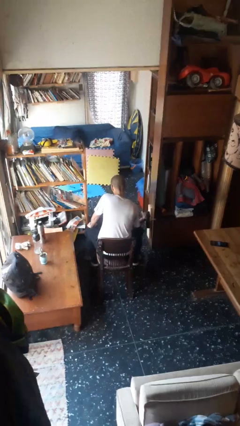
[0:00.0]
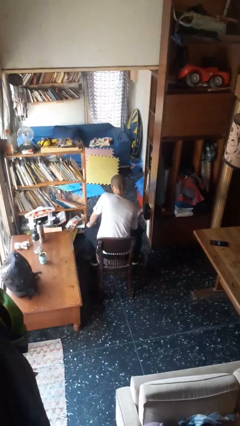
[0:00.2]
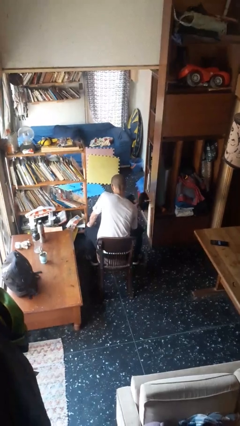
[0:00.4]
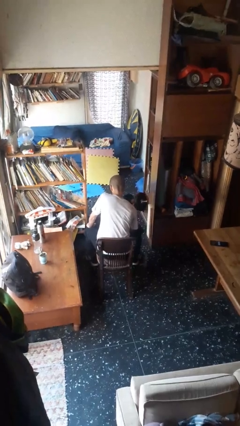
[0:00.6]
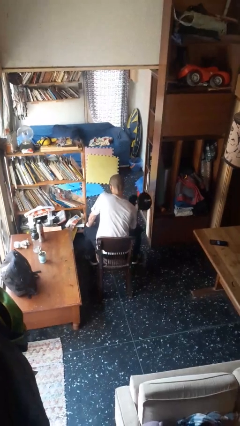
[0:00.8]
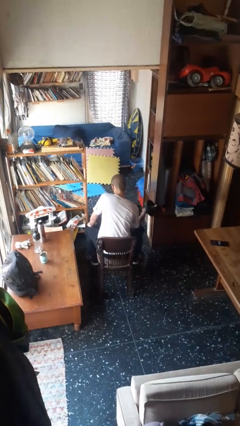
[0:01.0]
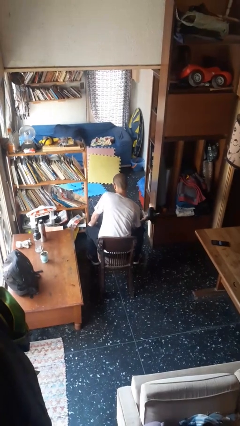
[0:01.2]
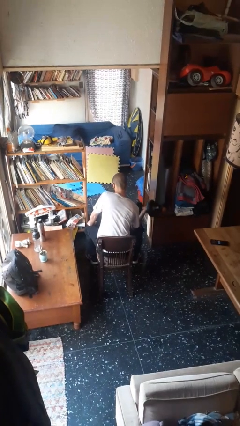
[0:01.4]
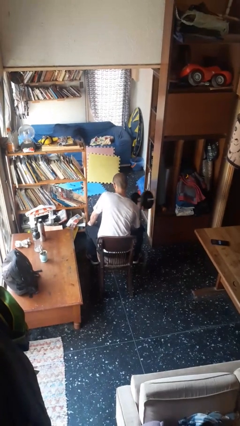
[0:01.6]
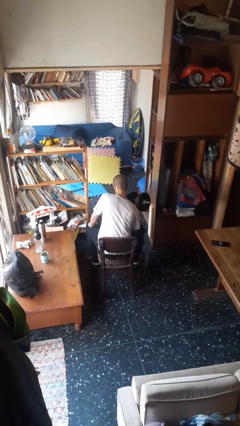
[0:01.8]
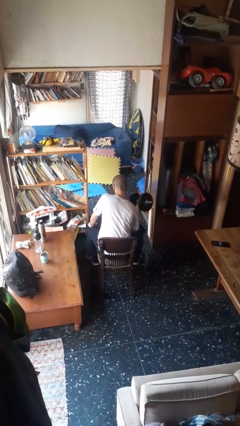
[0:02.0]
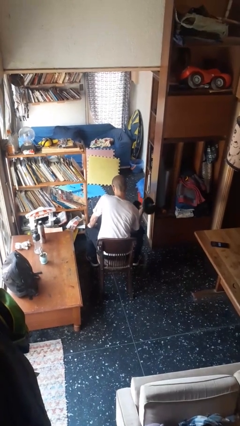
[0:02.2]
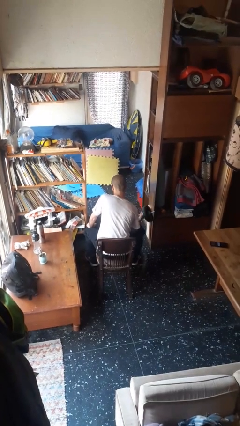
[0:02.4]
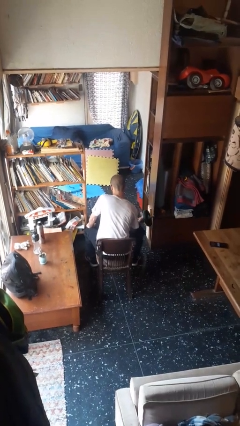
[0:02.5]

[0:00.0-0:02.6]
person lifts dumbbells

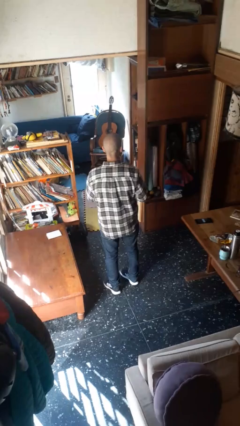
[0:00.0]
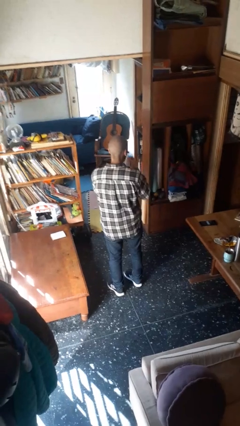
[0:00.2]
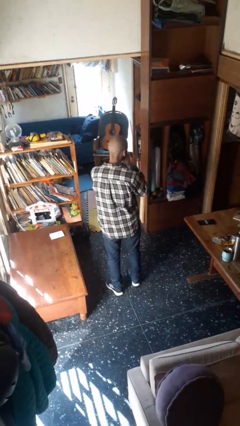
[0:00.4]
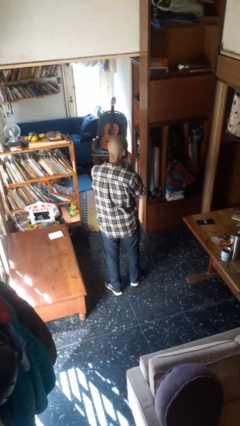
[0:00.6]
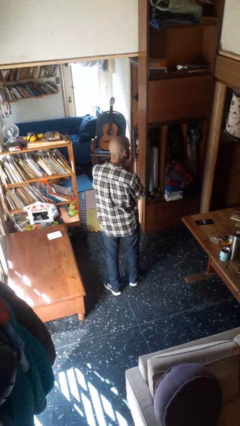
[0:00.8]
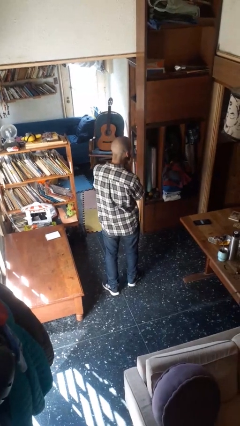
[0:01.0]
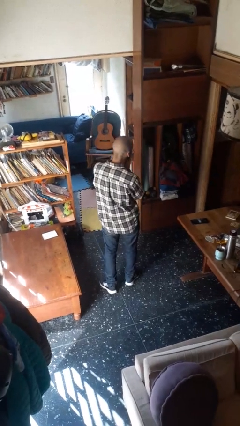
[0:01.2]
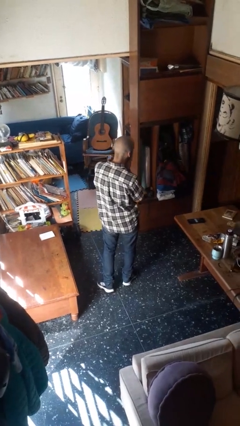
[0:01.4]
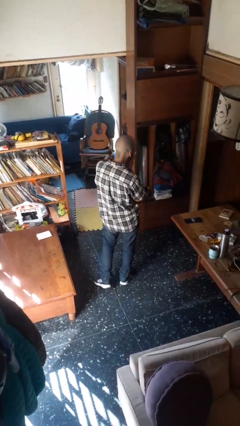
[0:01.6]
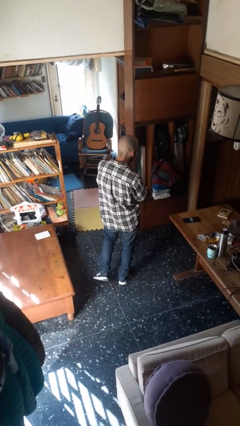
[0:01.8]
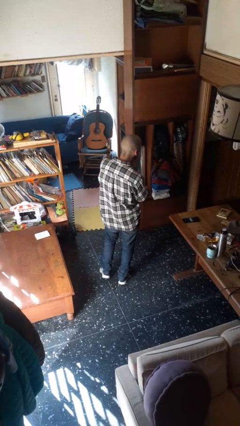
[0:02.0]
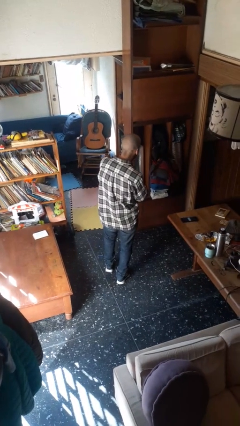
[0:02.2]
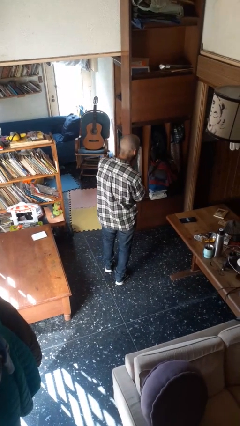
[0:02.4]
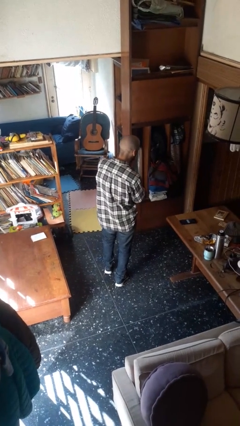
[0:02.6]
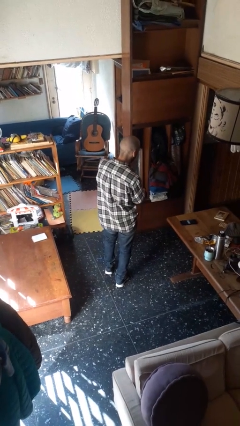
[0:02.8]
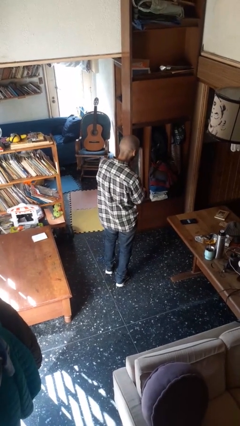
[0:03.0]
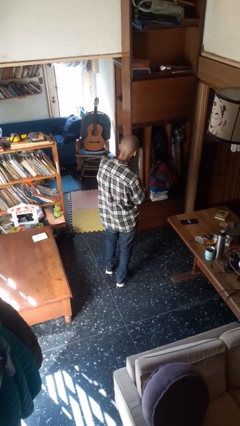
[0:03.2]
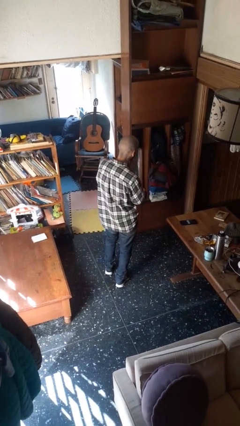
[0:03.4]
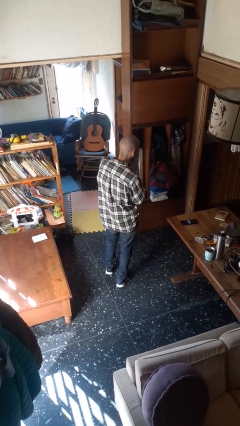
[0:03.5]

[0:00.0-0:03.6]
person wipes mouth with napkin

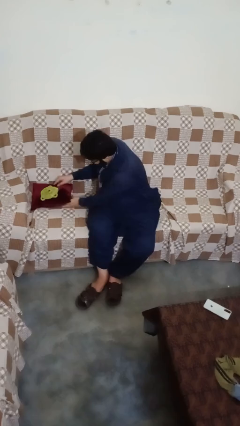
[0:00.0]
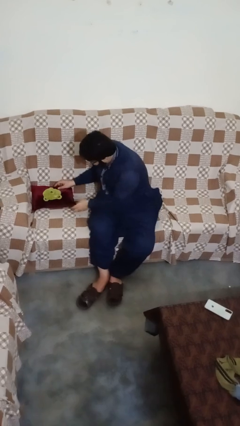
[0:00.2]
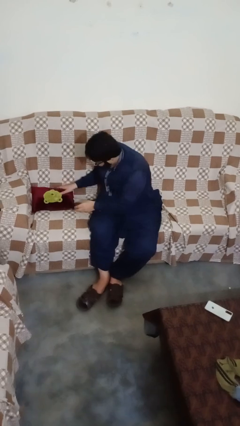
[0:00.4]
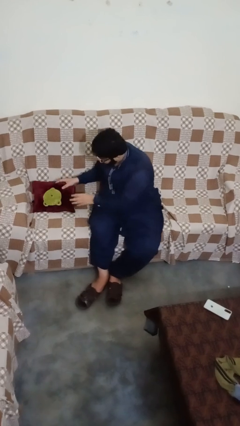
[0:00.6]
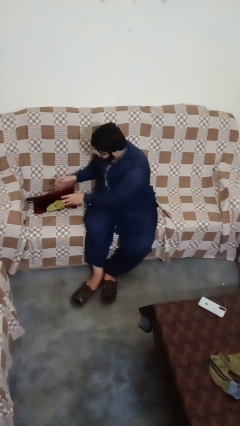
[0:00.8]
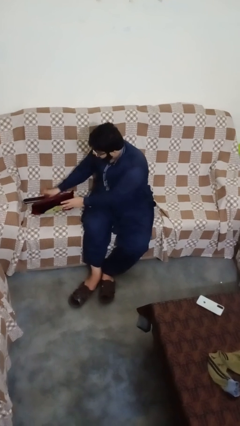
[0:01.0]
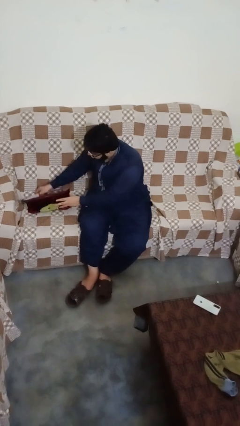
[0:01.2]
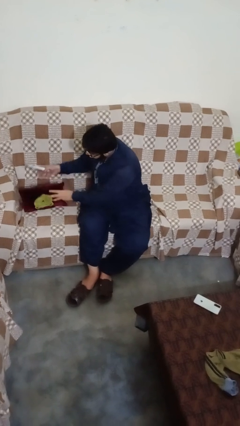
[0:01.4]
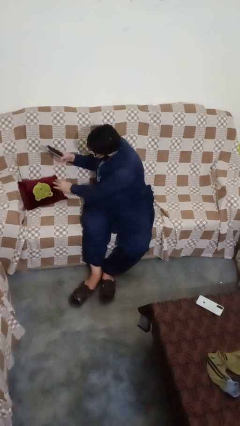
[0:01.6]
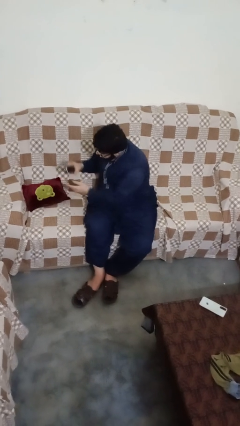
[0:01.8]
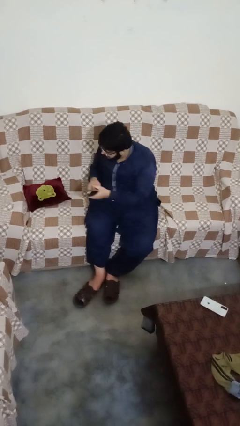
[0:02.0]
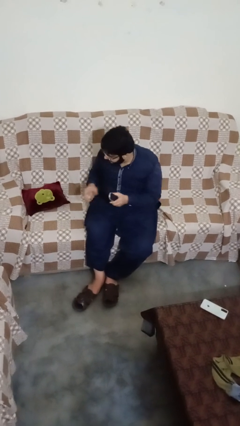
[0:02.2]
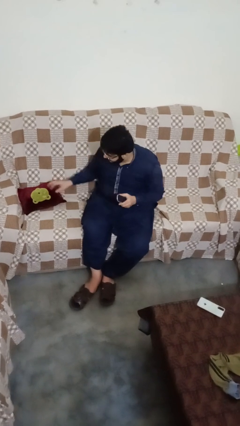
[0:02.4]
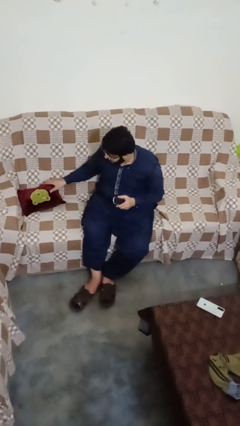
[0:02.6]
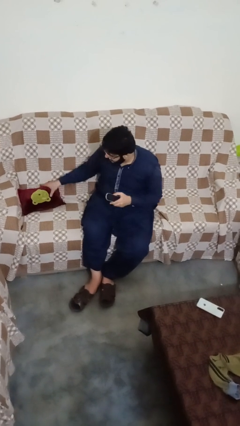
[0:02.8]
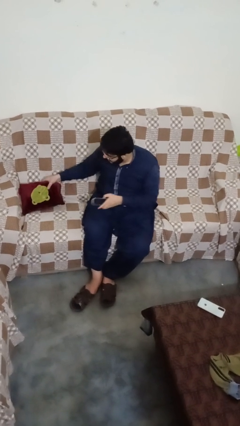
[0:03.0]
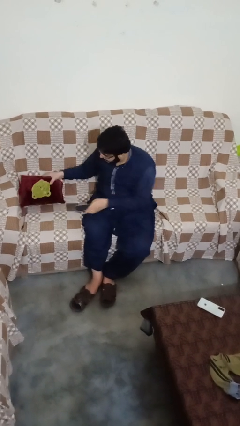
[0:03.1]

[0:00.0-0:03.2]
person searches in couch

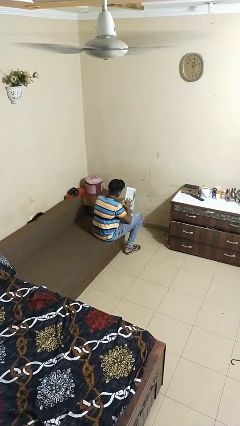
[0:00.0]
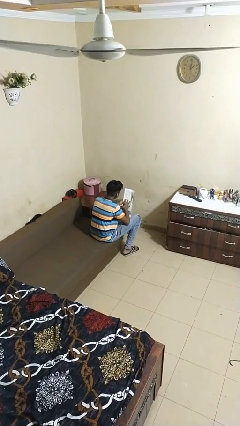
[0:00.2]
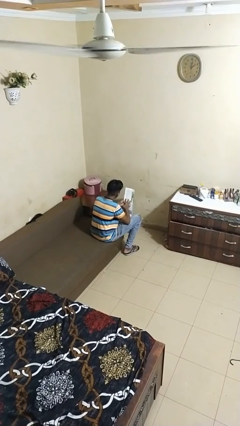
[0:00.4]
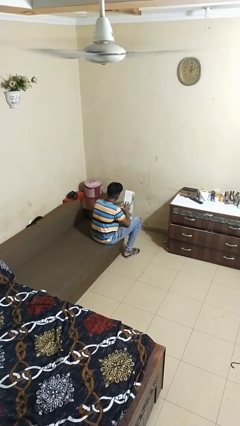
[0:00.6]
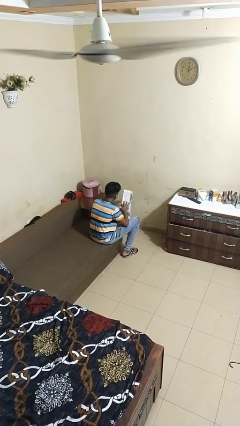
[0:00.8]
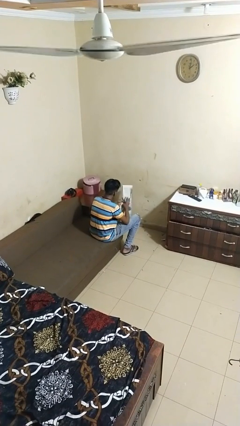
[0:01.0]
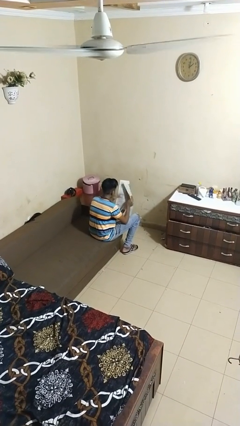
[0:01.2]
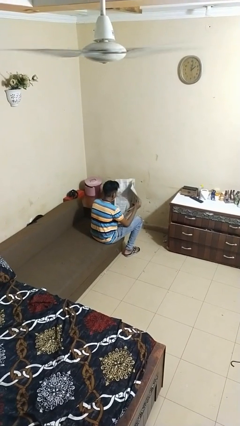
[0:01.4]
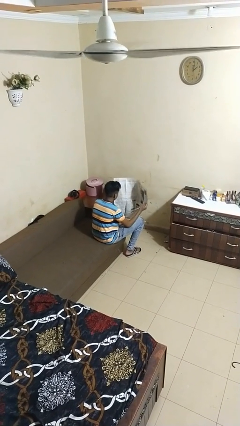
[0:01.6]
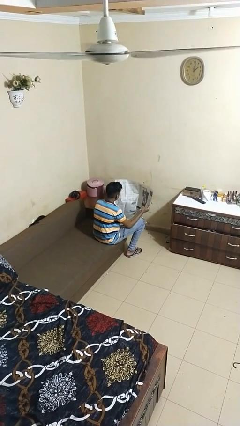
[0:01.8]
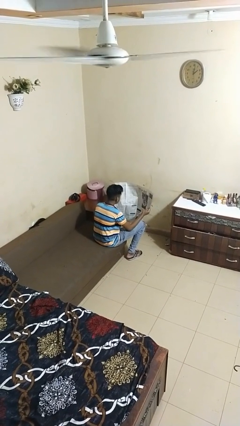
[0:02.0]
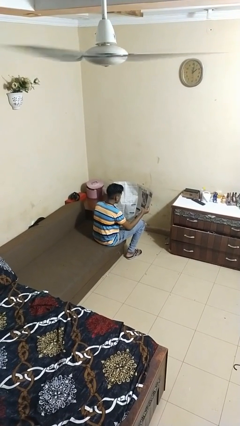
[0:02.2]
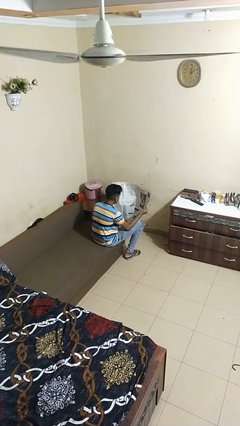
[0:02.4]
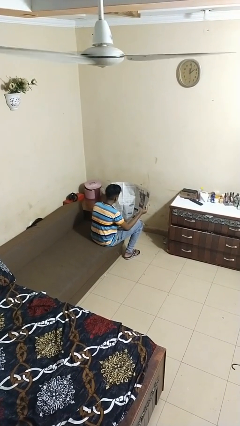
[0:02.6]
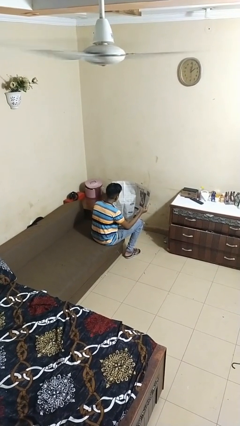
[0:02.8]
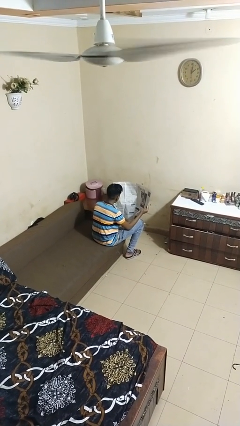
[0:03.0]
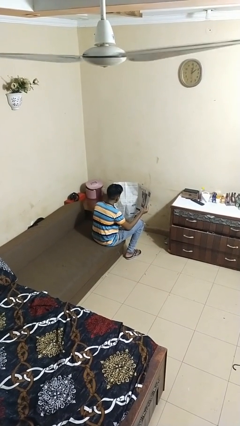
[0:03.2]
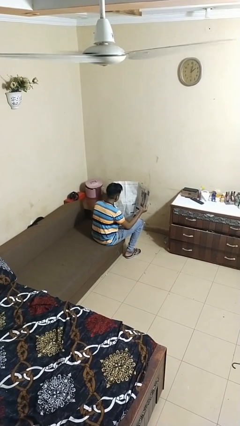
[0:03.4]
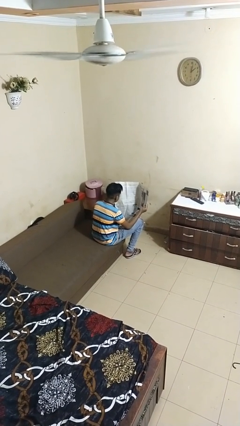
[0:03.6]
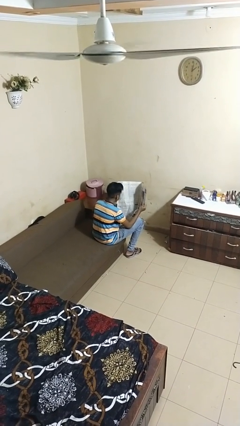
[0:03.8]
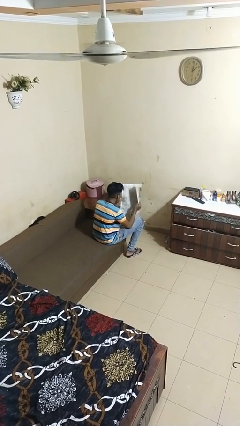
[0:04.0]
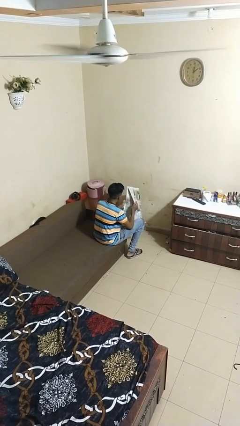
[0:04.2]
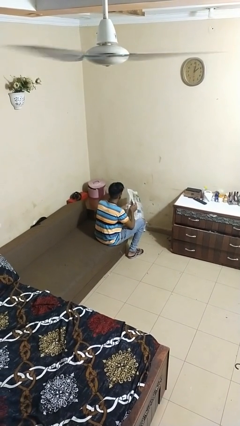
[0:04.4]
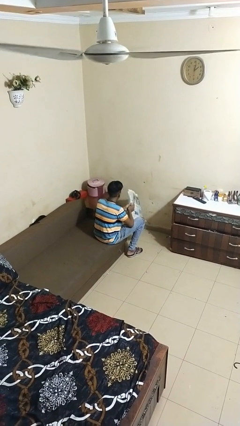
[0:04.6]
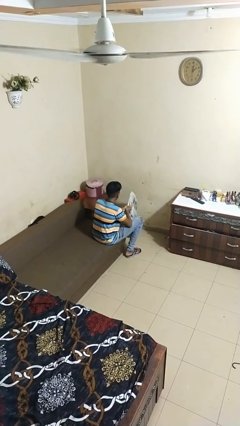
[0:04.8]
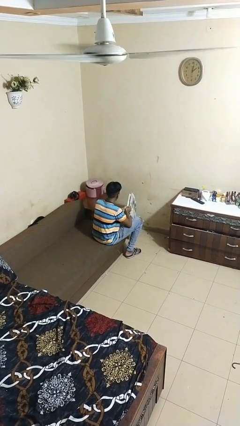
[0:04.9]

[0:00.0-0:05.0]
person reads newspaper

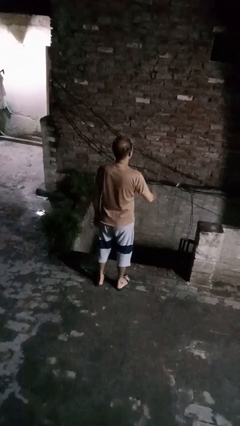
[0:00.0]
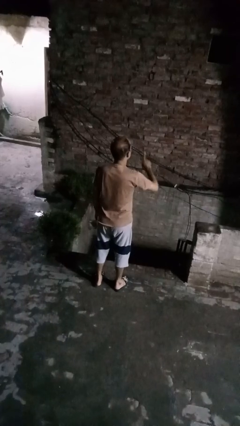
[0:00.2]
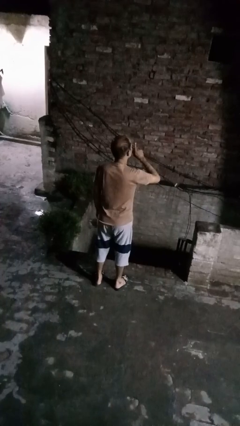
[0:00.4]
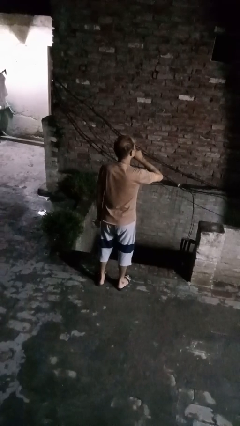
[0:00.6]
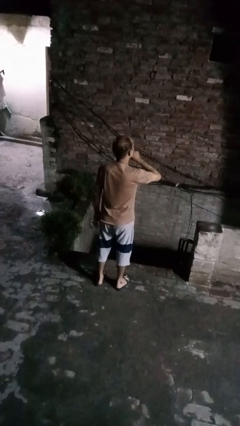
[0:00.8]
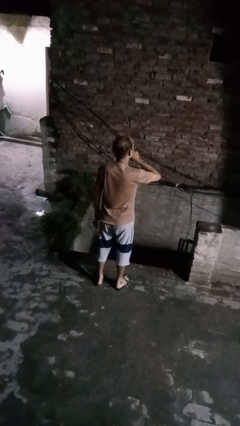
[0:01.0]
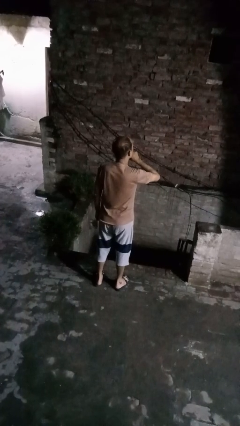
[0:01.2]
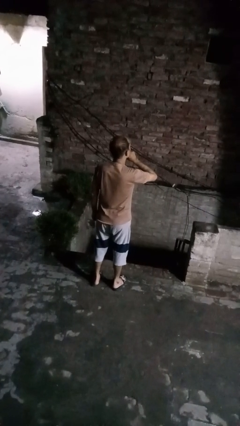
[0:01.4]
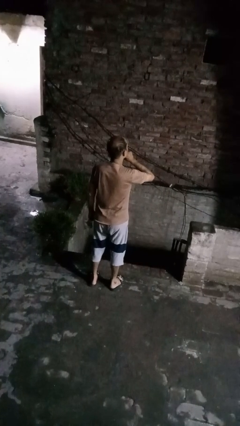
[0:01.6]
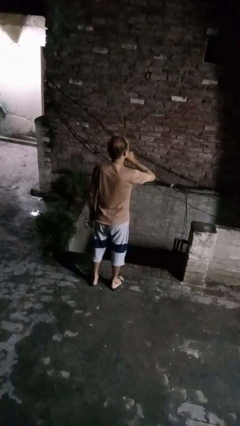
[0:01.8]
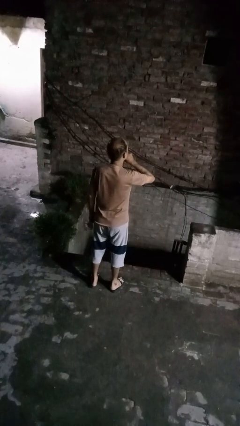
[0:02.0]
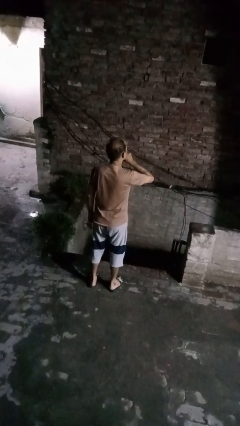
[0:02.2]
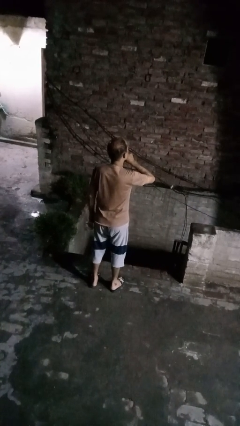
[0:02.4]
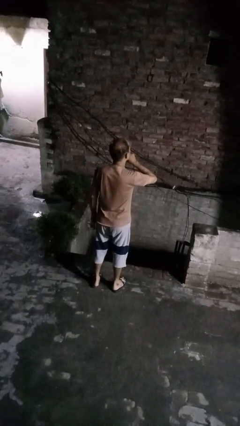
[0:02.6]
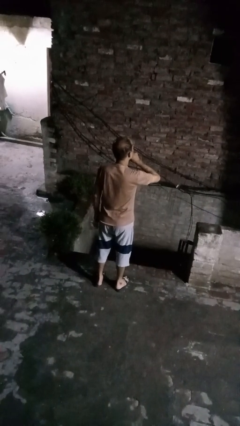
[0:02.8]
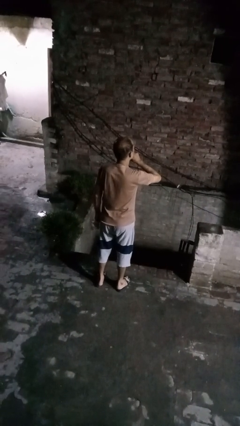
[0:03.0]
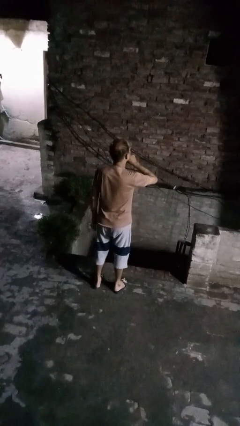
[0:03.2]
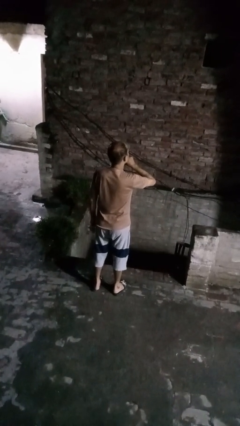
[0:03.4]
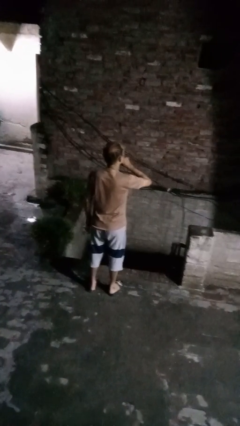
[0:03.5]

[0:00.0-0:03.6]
person gestures be quiet
